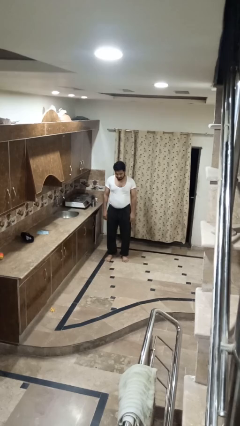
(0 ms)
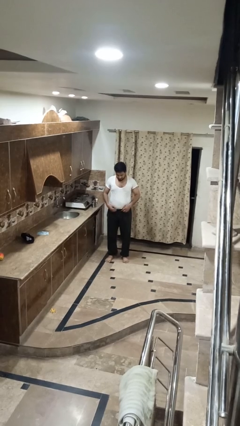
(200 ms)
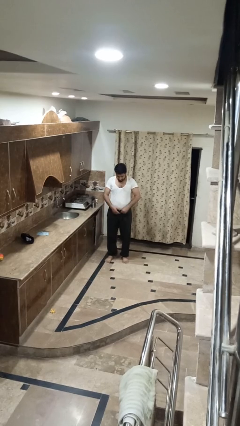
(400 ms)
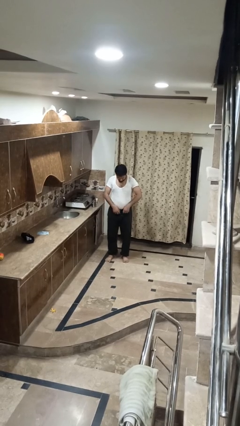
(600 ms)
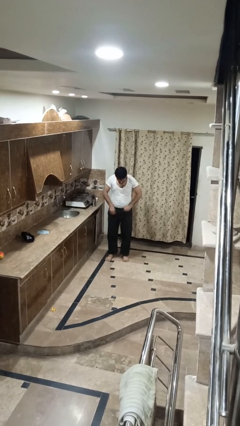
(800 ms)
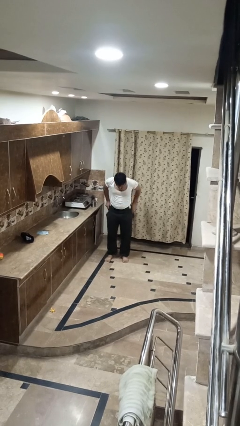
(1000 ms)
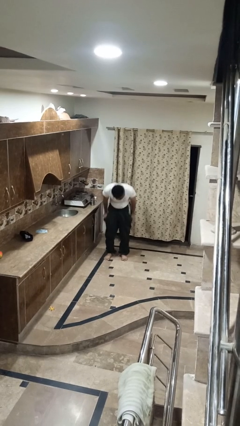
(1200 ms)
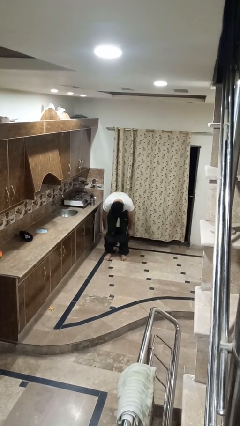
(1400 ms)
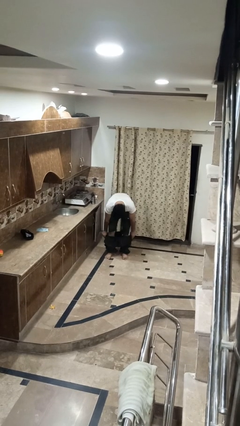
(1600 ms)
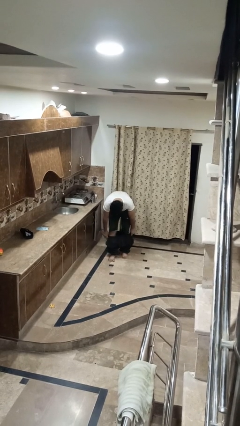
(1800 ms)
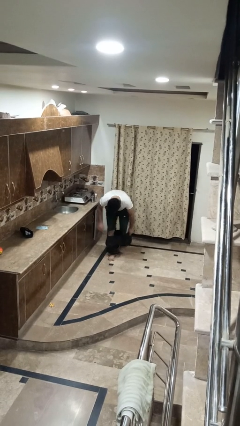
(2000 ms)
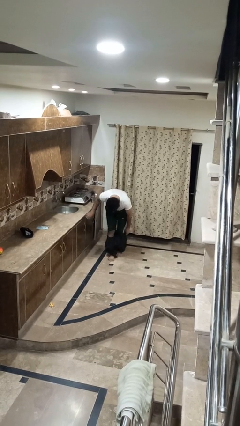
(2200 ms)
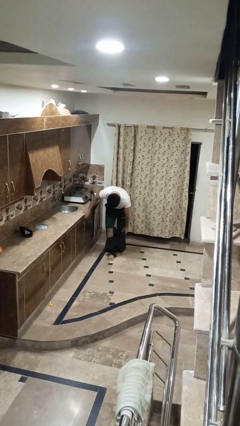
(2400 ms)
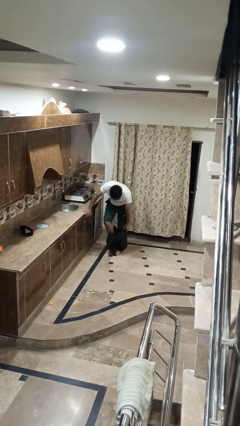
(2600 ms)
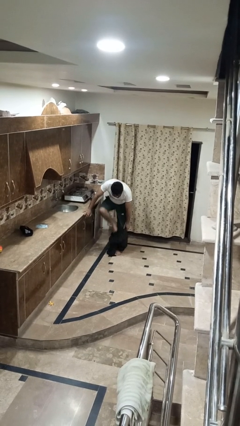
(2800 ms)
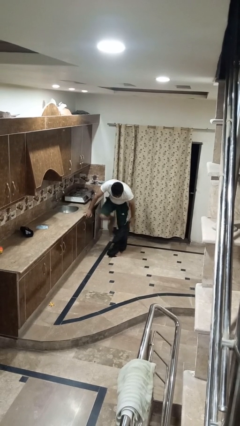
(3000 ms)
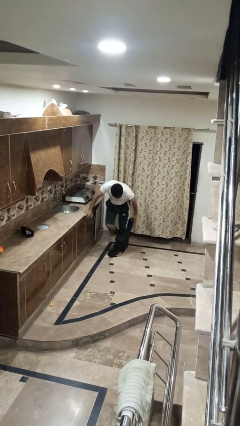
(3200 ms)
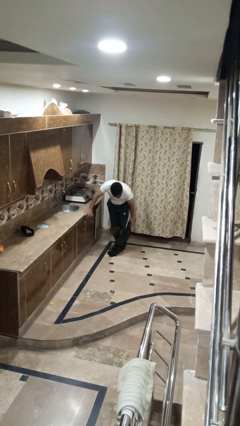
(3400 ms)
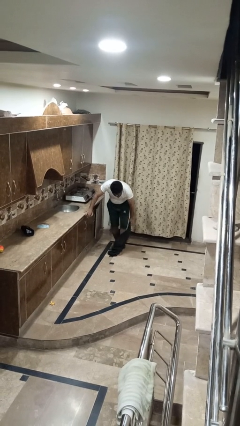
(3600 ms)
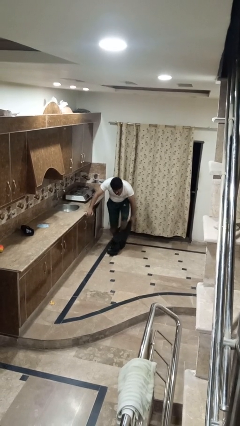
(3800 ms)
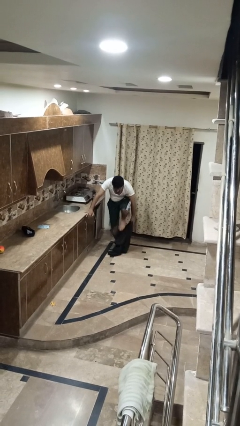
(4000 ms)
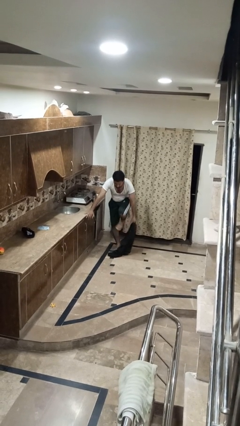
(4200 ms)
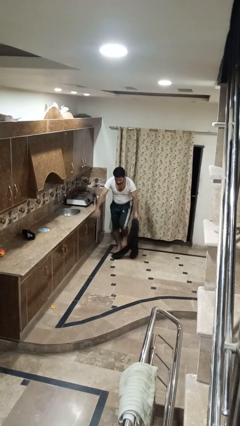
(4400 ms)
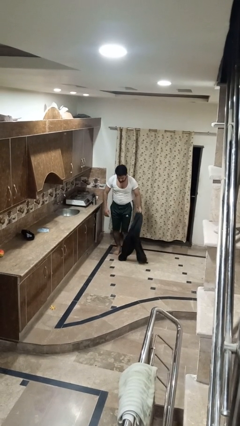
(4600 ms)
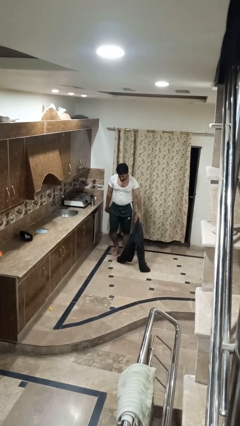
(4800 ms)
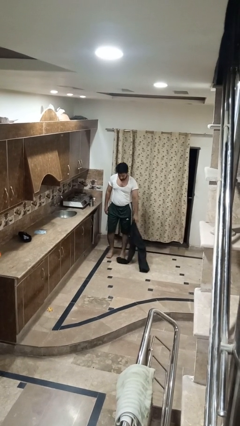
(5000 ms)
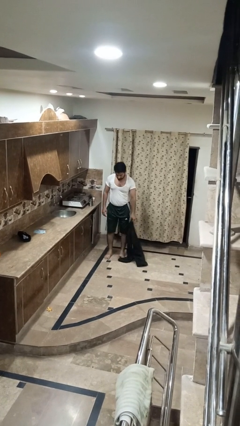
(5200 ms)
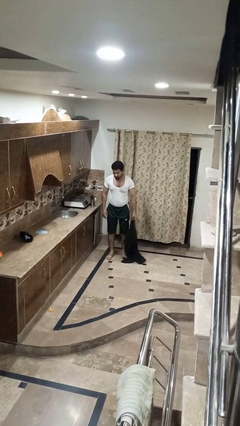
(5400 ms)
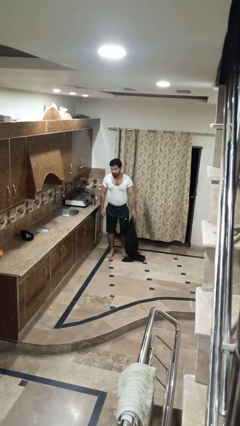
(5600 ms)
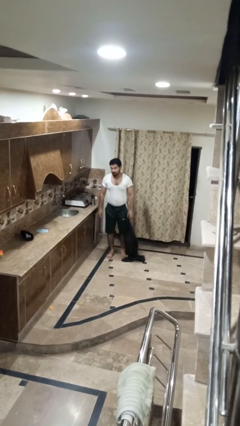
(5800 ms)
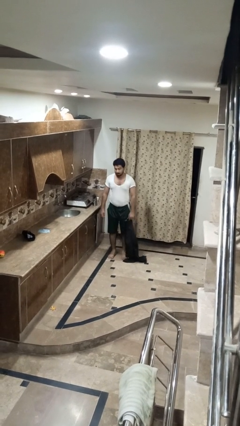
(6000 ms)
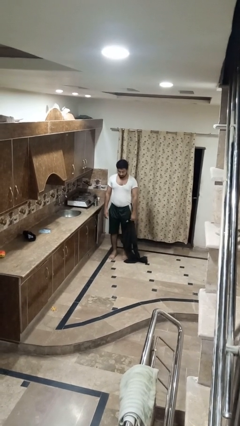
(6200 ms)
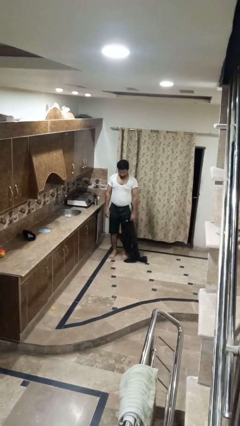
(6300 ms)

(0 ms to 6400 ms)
person takes off pants

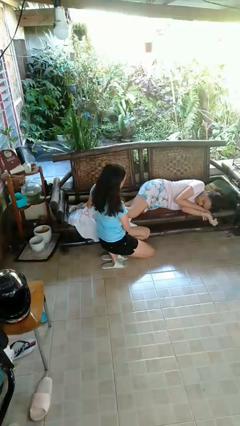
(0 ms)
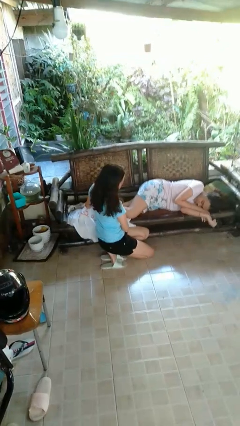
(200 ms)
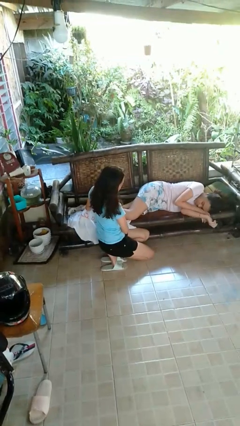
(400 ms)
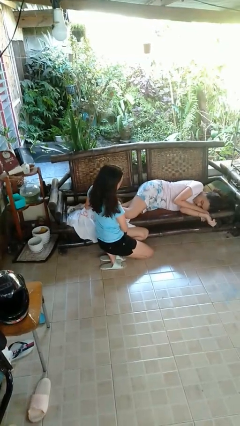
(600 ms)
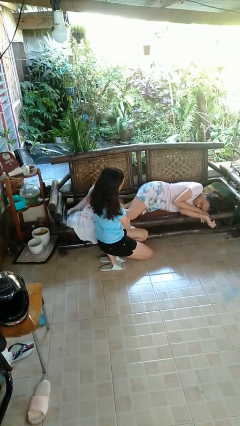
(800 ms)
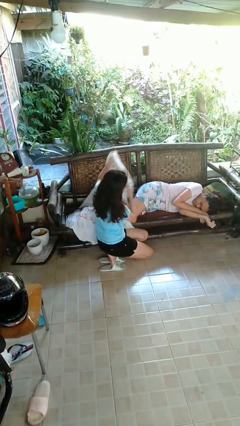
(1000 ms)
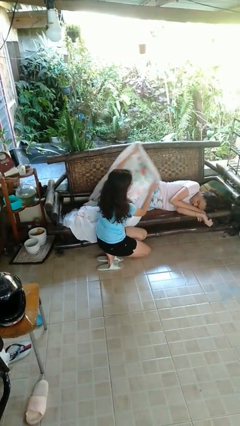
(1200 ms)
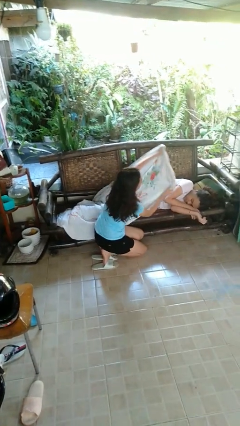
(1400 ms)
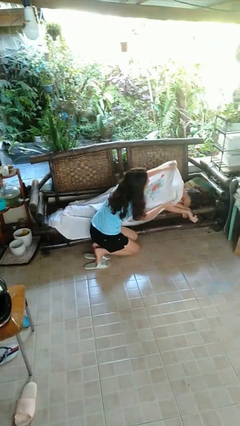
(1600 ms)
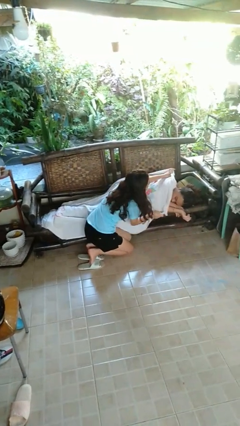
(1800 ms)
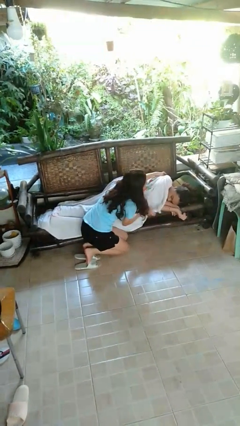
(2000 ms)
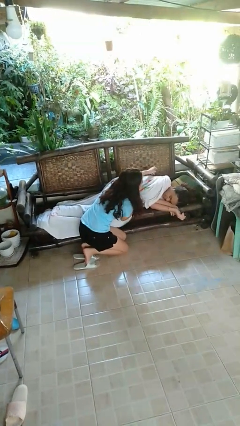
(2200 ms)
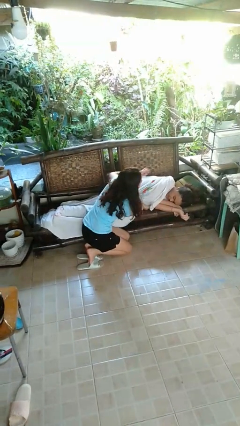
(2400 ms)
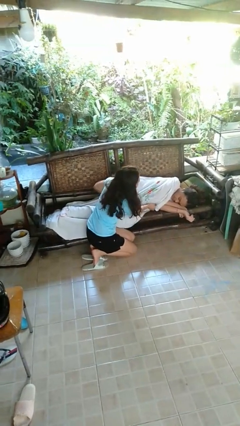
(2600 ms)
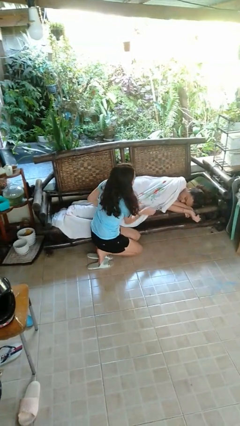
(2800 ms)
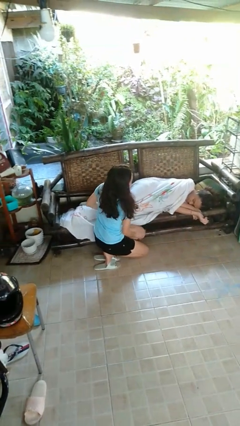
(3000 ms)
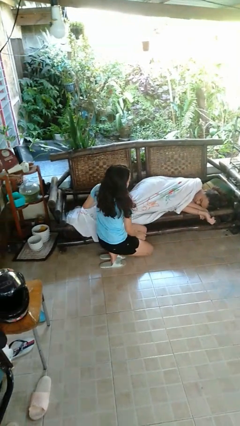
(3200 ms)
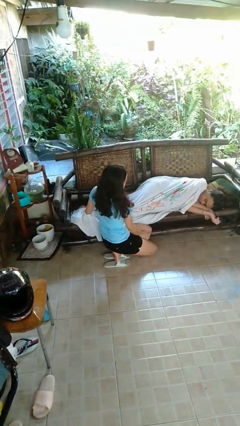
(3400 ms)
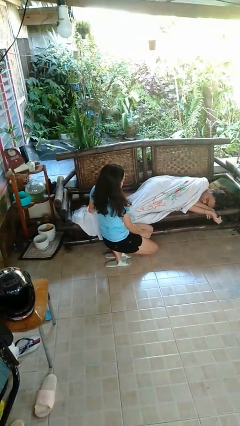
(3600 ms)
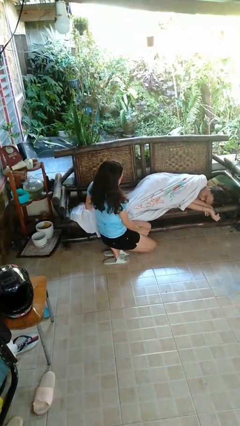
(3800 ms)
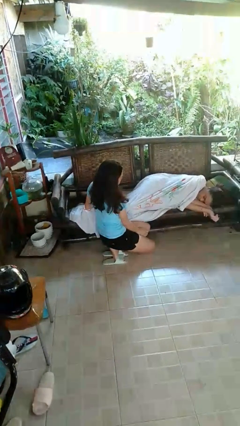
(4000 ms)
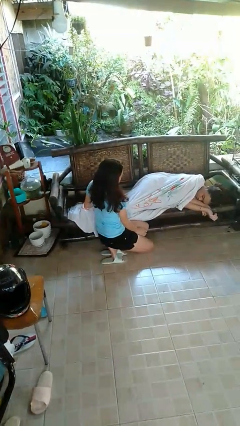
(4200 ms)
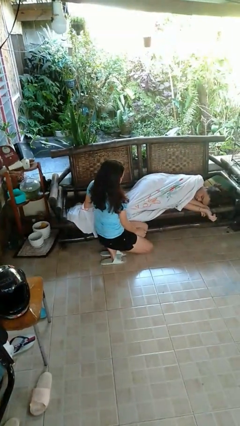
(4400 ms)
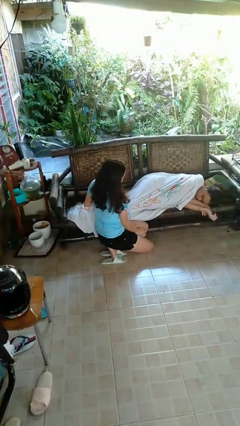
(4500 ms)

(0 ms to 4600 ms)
person covers friend with blanket

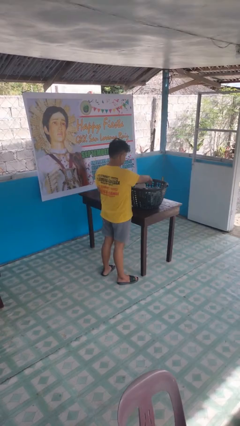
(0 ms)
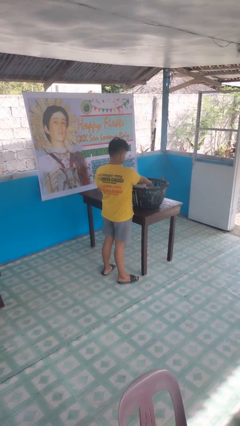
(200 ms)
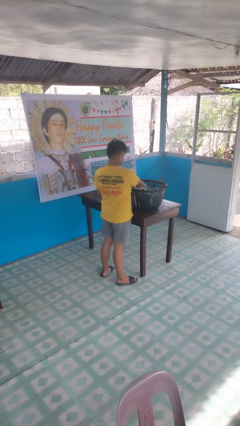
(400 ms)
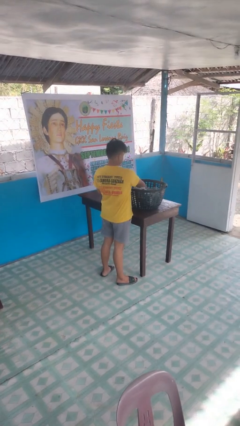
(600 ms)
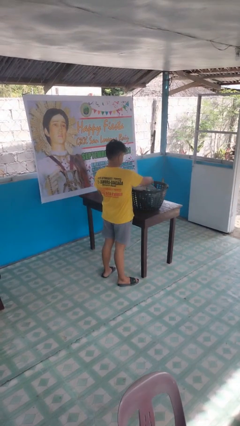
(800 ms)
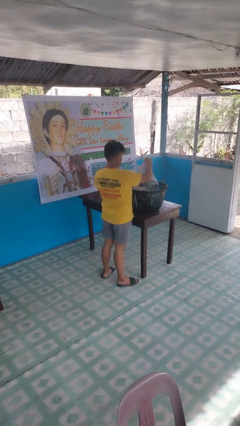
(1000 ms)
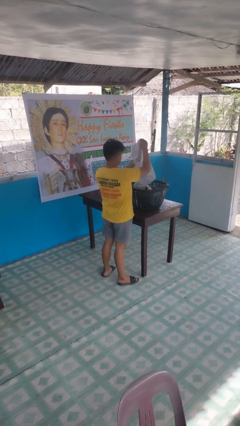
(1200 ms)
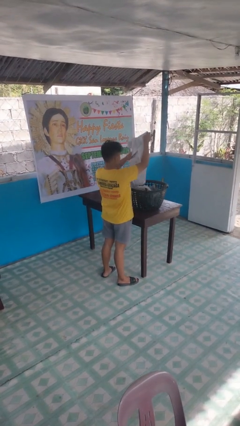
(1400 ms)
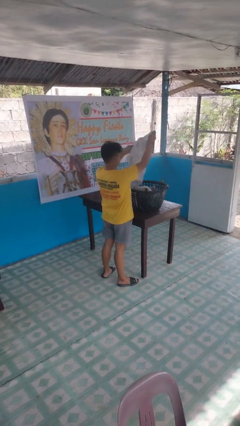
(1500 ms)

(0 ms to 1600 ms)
person takes object from basket

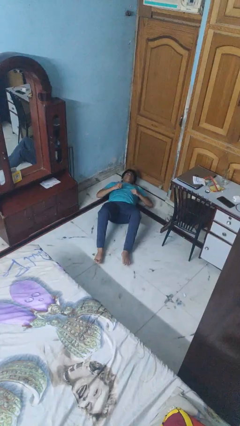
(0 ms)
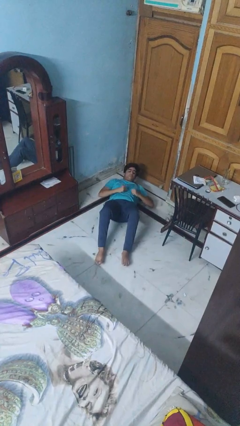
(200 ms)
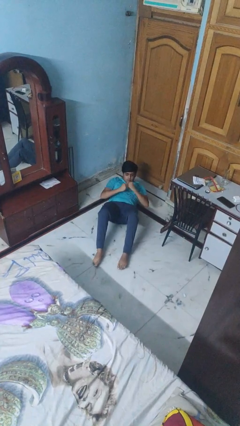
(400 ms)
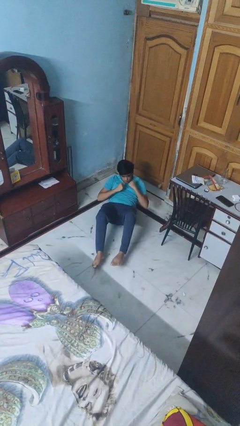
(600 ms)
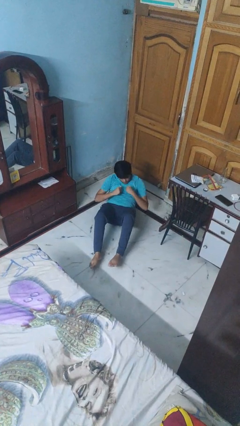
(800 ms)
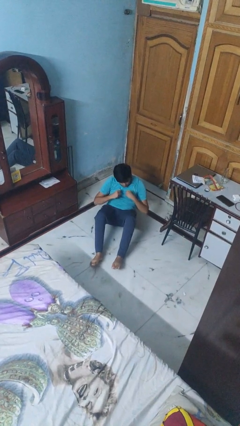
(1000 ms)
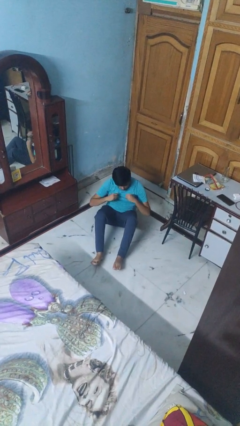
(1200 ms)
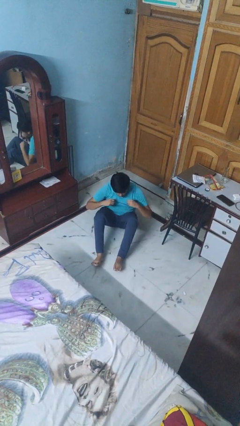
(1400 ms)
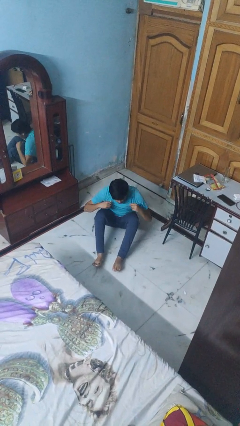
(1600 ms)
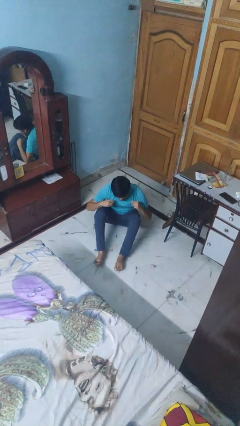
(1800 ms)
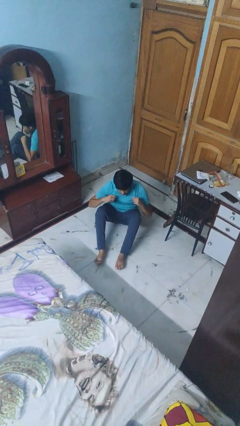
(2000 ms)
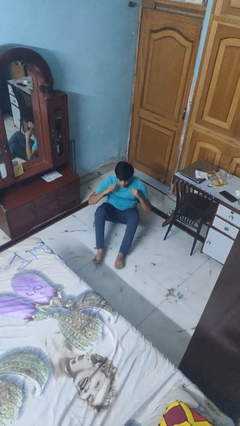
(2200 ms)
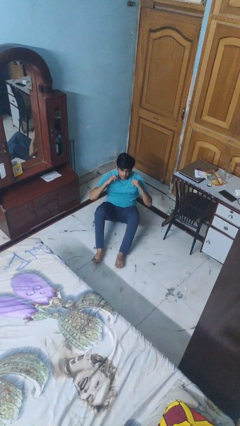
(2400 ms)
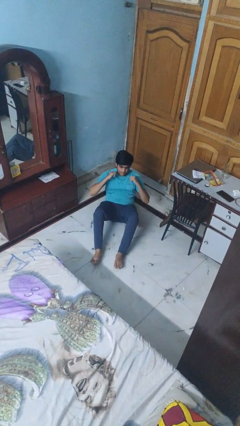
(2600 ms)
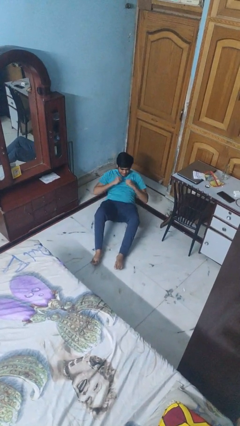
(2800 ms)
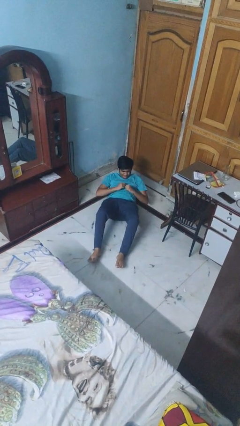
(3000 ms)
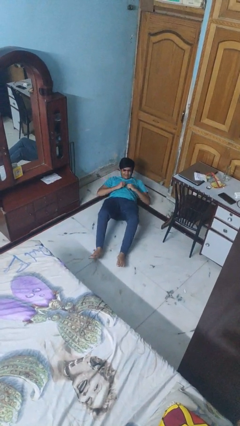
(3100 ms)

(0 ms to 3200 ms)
person exercises with situp

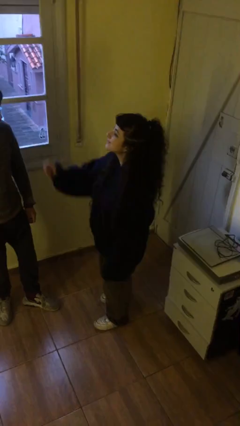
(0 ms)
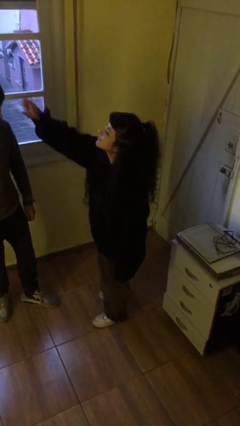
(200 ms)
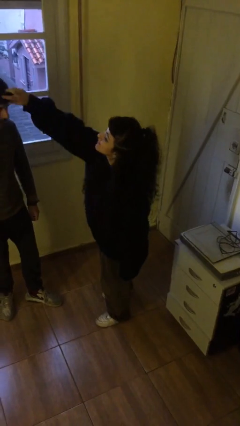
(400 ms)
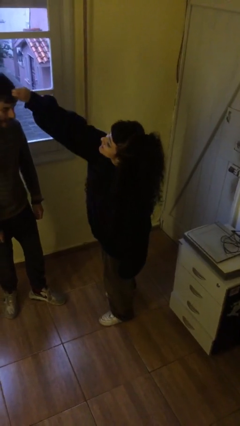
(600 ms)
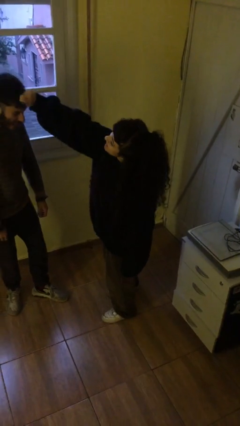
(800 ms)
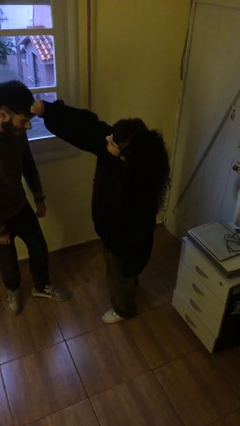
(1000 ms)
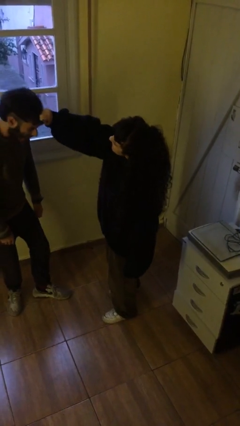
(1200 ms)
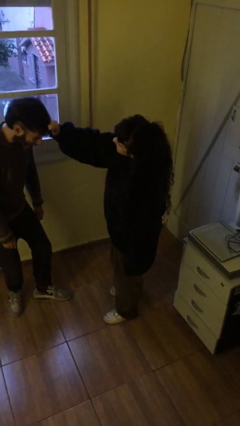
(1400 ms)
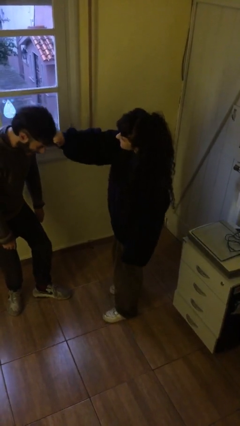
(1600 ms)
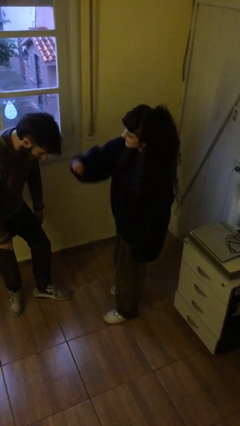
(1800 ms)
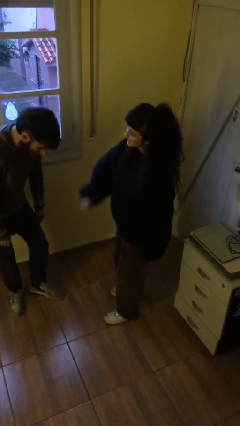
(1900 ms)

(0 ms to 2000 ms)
person grabs person by hair
